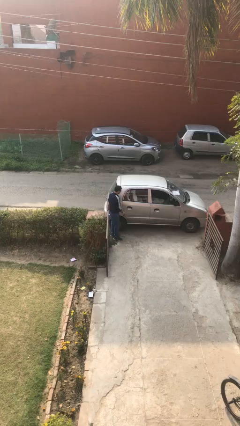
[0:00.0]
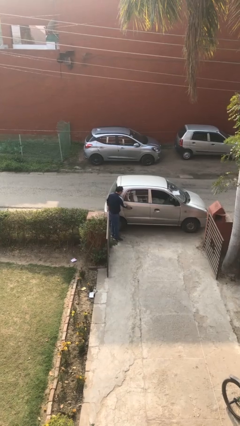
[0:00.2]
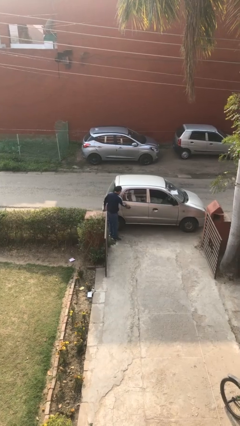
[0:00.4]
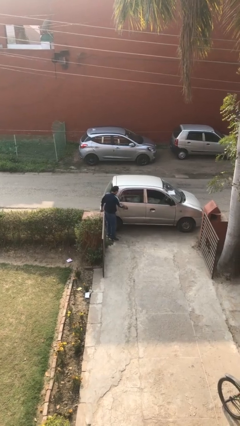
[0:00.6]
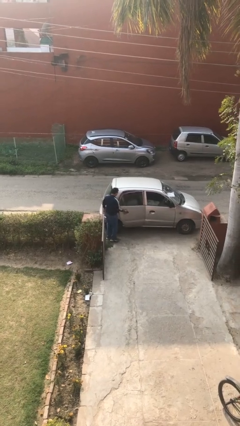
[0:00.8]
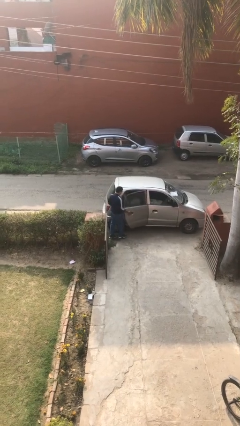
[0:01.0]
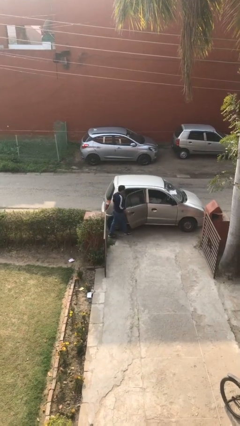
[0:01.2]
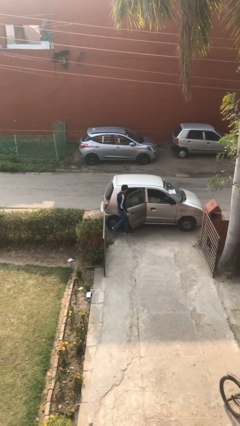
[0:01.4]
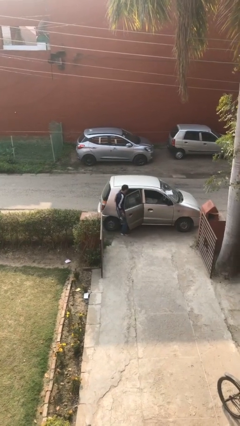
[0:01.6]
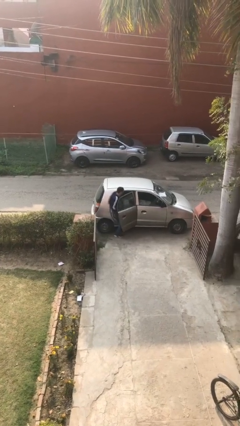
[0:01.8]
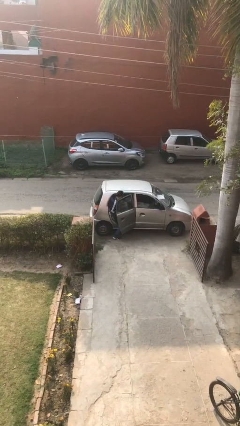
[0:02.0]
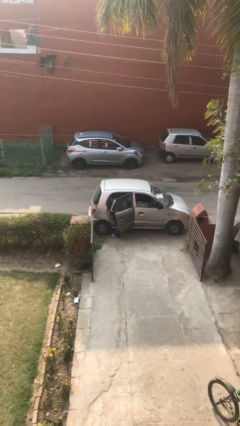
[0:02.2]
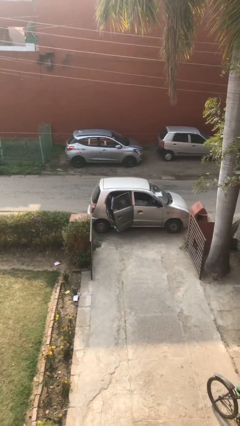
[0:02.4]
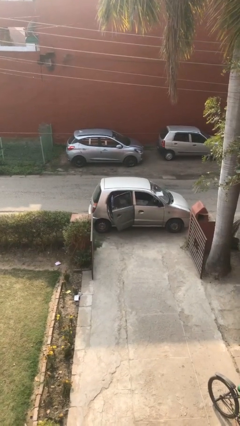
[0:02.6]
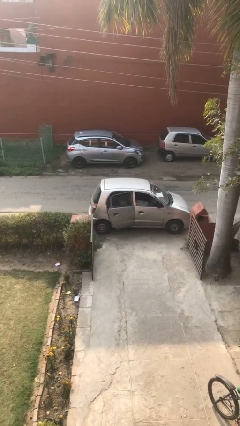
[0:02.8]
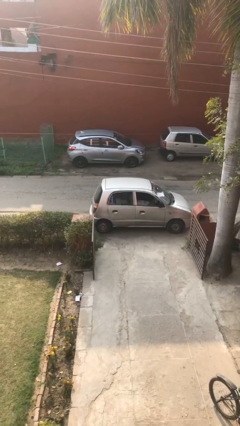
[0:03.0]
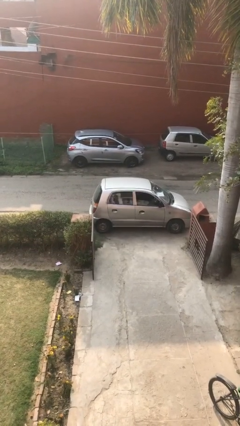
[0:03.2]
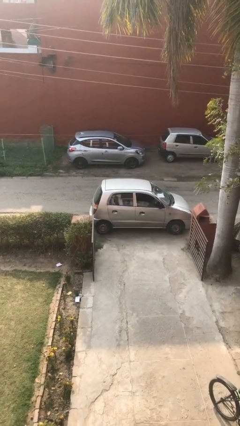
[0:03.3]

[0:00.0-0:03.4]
person enters car

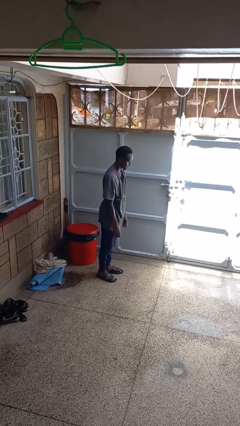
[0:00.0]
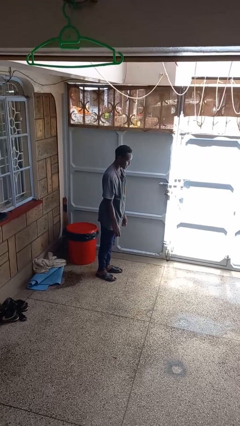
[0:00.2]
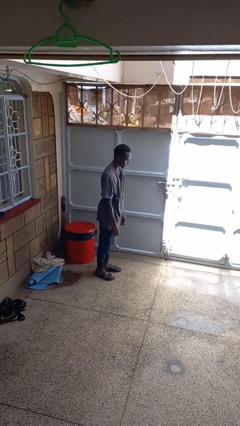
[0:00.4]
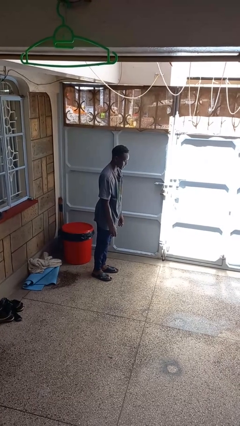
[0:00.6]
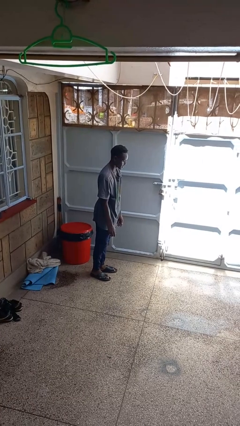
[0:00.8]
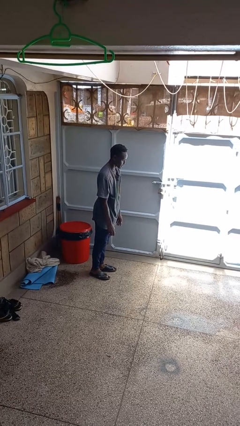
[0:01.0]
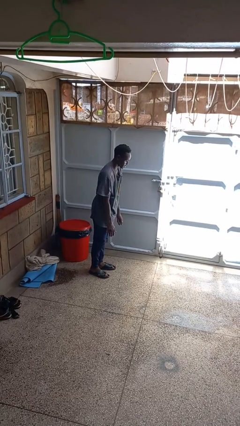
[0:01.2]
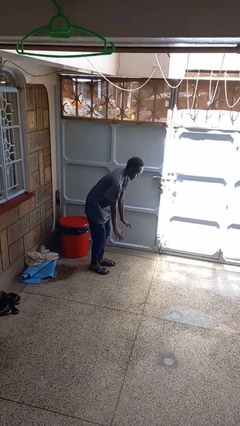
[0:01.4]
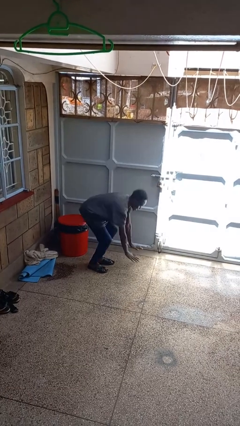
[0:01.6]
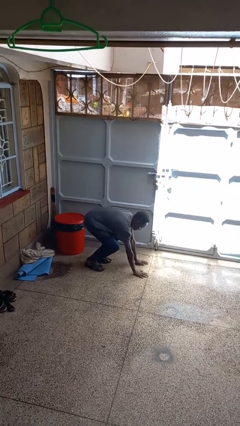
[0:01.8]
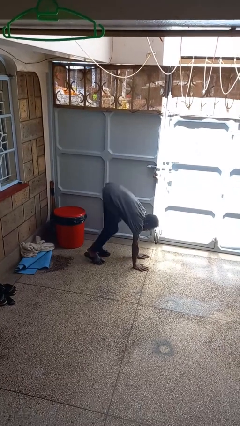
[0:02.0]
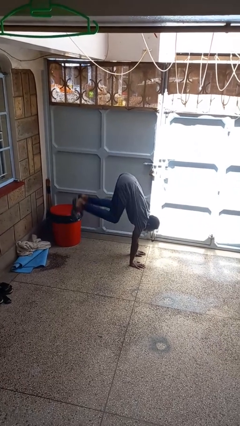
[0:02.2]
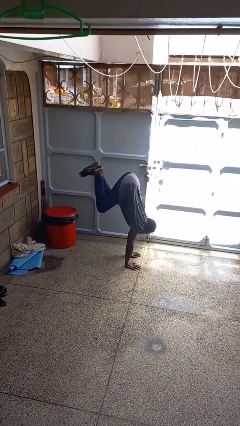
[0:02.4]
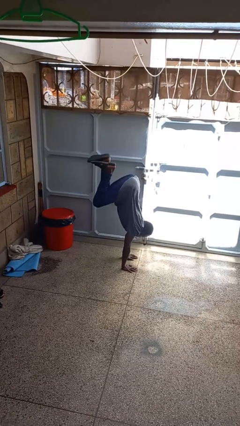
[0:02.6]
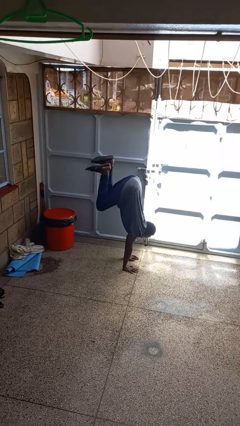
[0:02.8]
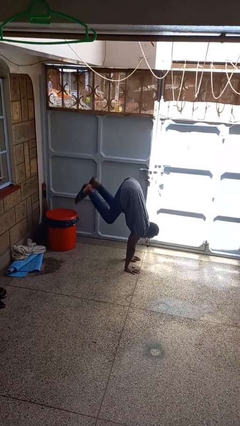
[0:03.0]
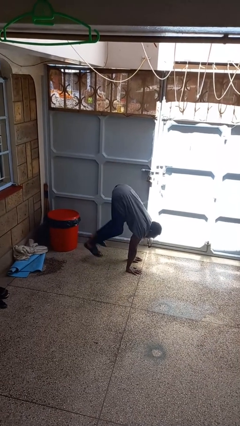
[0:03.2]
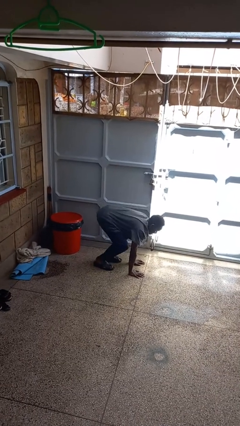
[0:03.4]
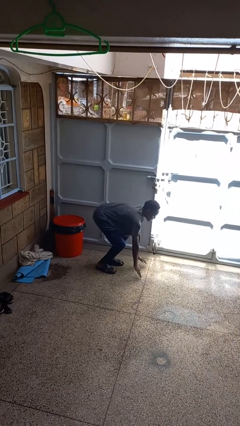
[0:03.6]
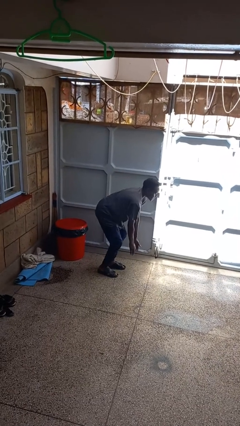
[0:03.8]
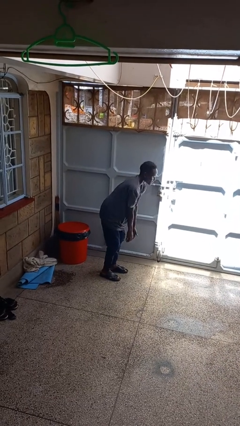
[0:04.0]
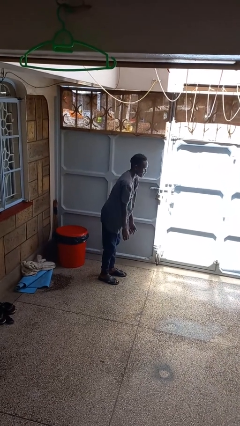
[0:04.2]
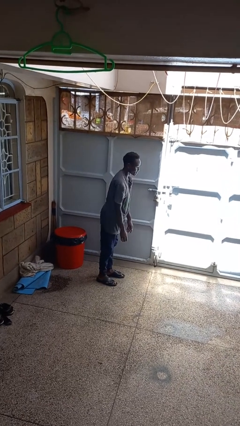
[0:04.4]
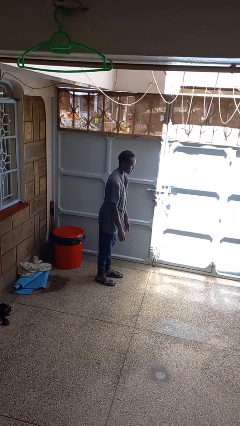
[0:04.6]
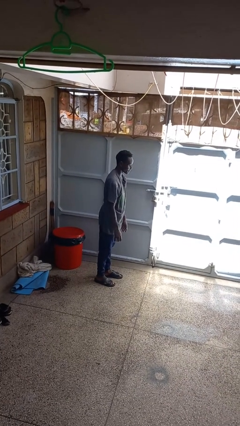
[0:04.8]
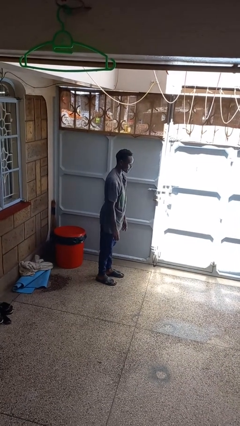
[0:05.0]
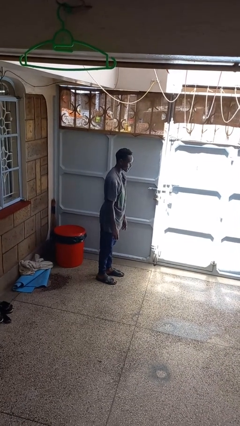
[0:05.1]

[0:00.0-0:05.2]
person handstand

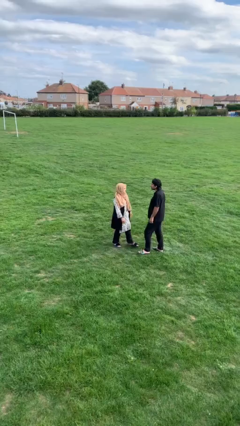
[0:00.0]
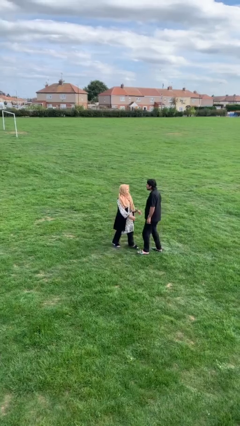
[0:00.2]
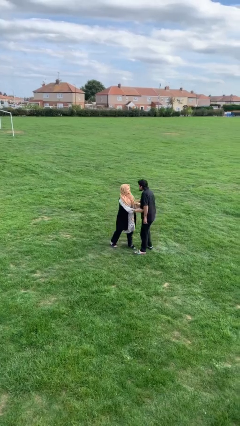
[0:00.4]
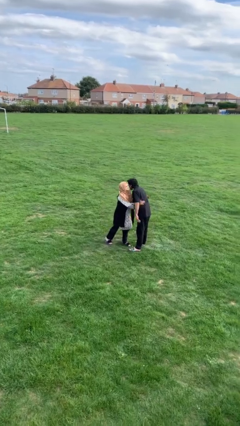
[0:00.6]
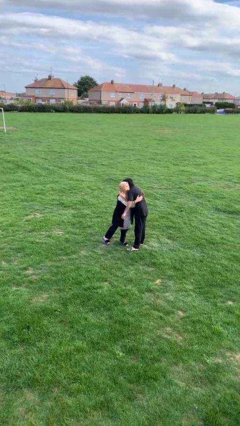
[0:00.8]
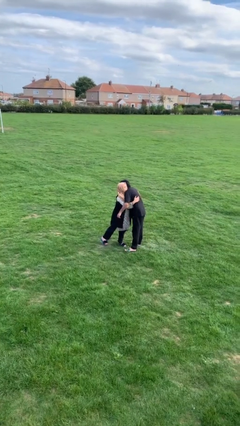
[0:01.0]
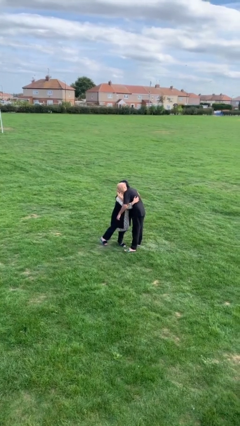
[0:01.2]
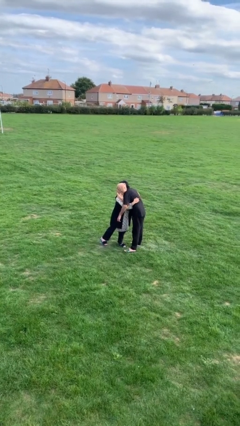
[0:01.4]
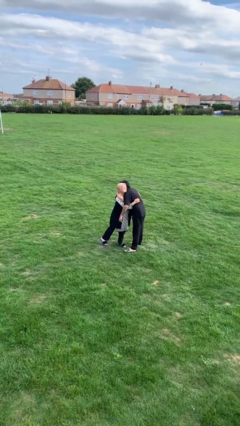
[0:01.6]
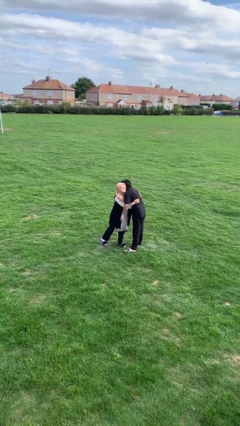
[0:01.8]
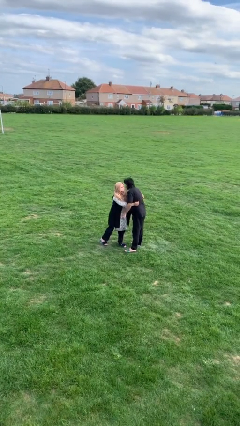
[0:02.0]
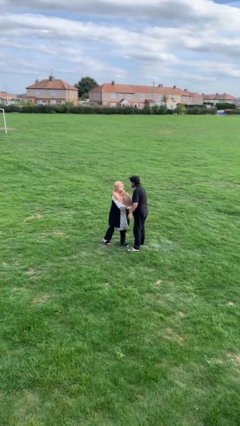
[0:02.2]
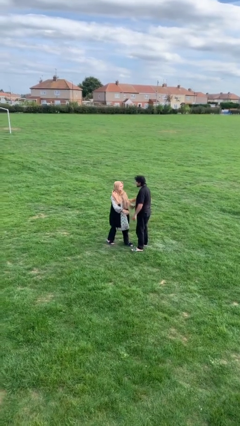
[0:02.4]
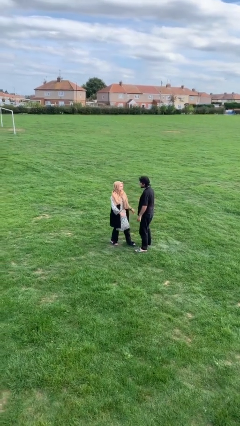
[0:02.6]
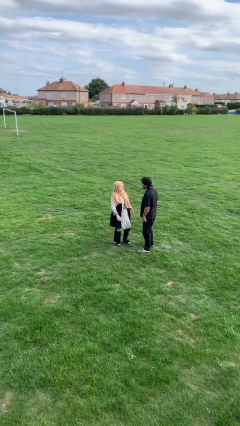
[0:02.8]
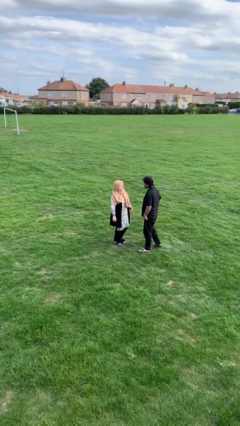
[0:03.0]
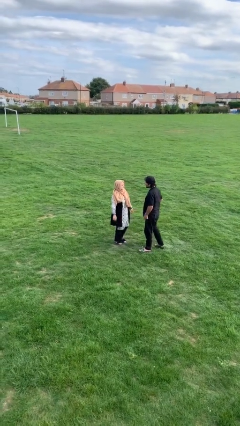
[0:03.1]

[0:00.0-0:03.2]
person embraces person

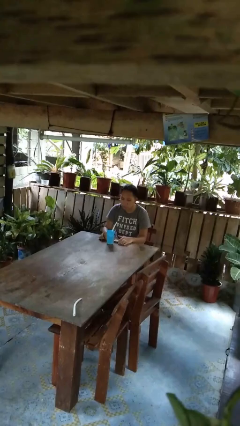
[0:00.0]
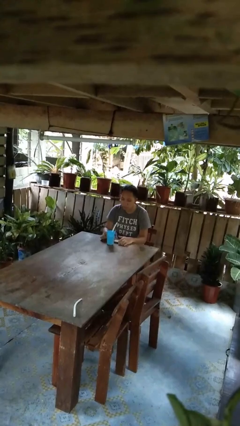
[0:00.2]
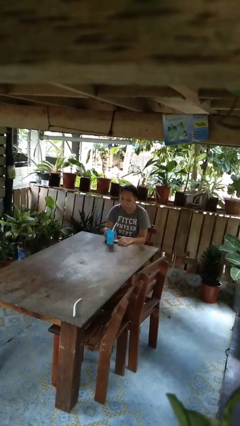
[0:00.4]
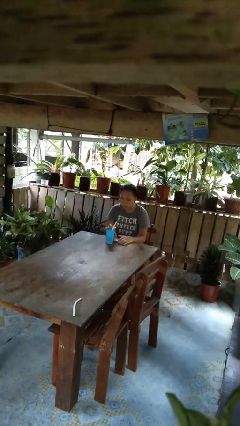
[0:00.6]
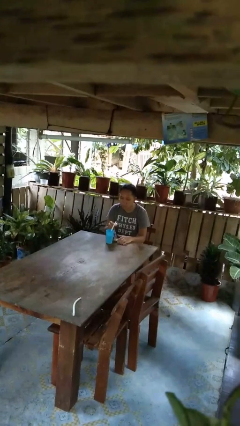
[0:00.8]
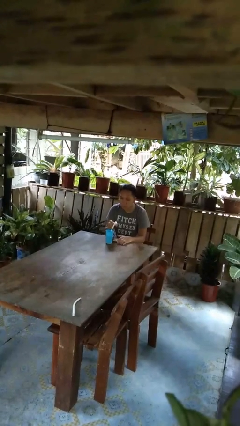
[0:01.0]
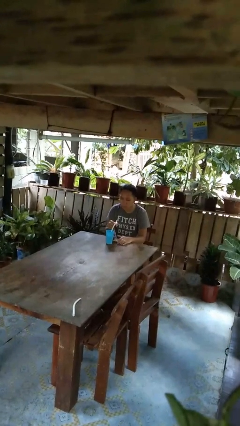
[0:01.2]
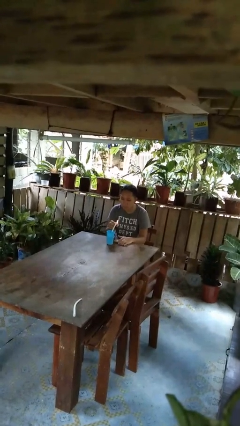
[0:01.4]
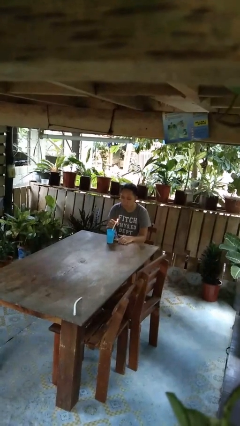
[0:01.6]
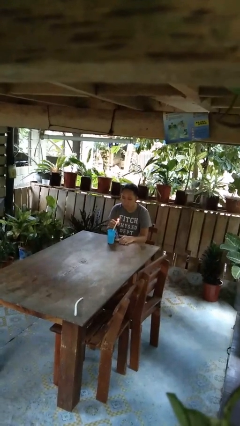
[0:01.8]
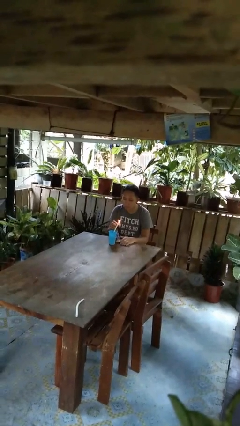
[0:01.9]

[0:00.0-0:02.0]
person lights candle

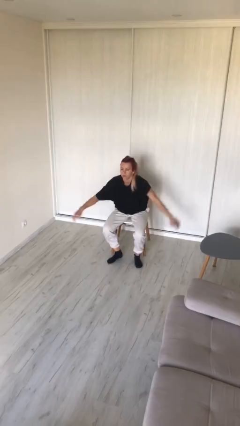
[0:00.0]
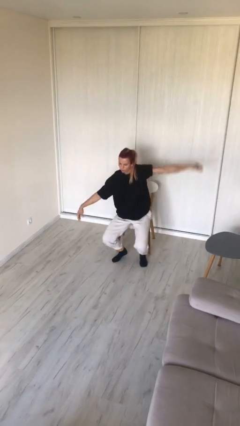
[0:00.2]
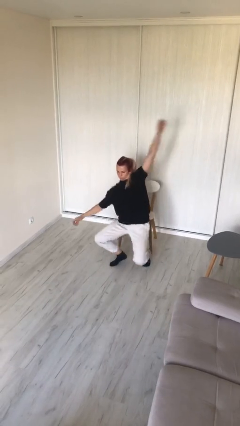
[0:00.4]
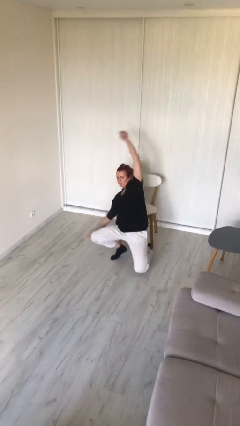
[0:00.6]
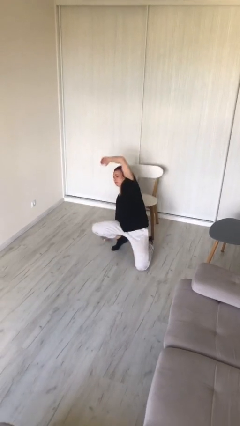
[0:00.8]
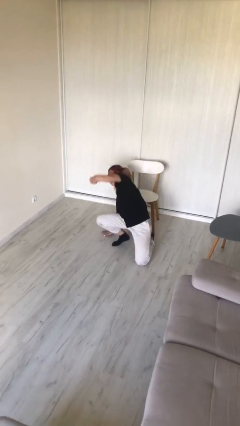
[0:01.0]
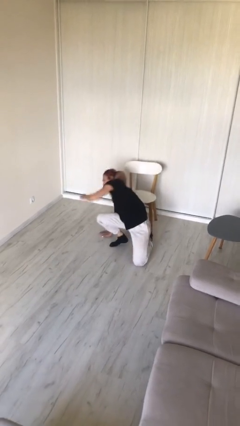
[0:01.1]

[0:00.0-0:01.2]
person falls from chair

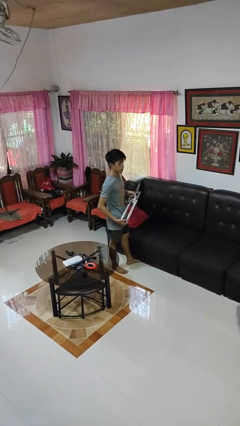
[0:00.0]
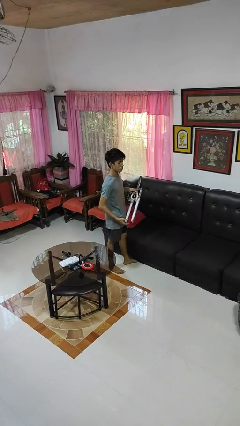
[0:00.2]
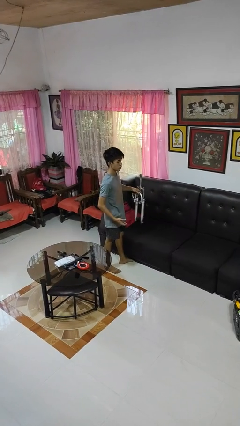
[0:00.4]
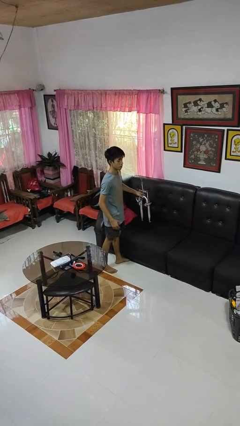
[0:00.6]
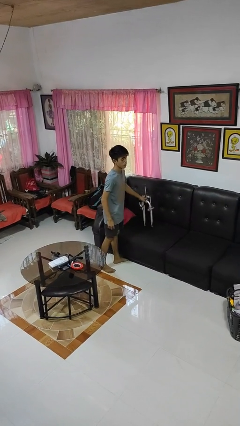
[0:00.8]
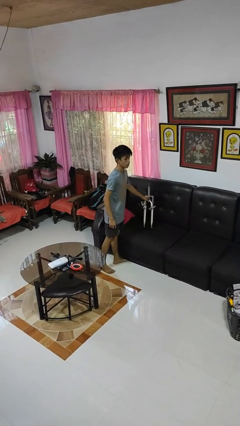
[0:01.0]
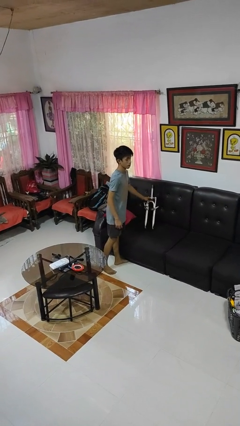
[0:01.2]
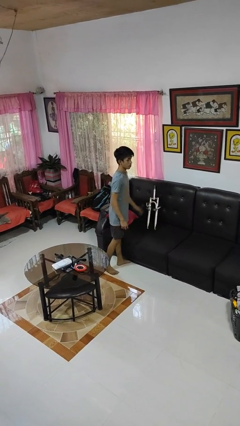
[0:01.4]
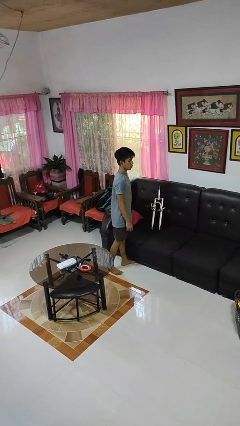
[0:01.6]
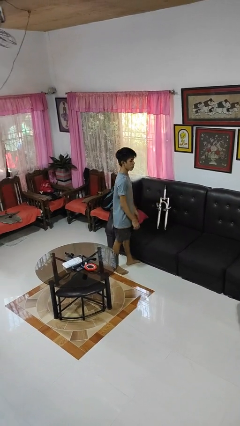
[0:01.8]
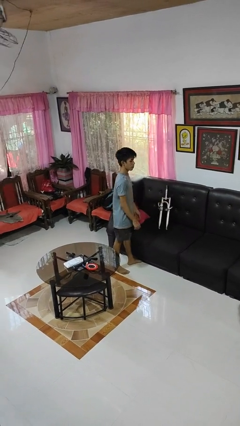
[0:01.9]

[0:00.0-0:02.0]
person puts down object on couch

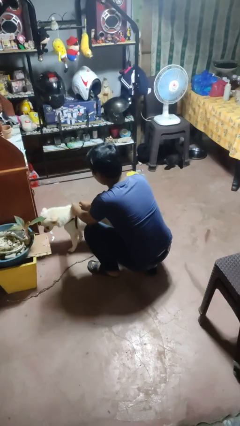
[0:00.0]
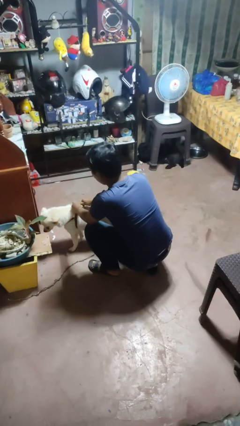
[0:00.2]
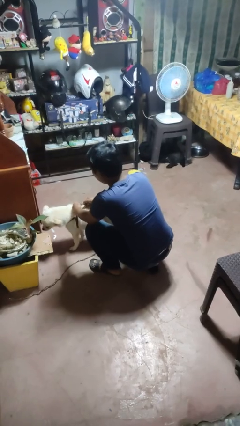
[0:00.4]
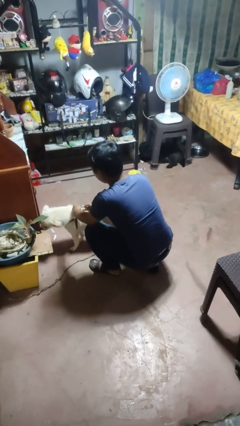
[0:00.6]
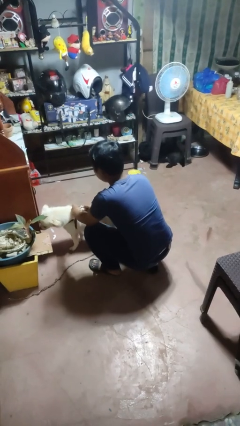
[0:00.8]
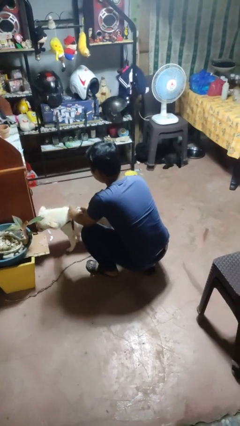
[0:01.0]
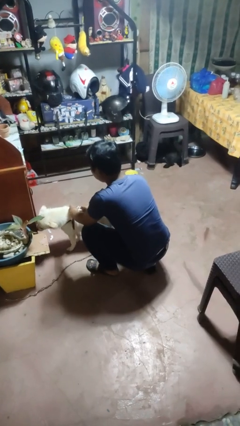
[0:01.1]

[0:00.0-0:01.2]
person attaches leash to dog
